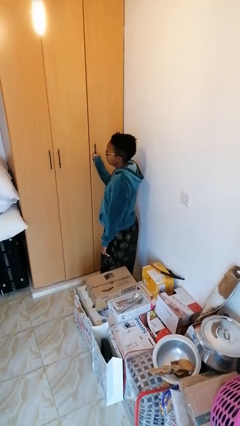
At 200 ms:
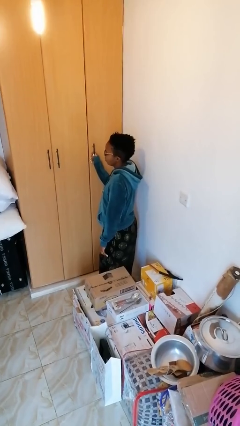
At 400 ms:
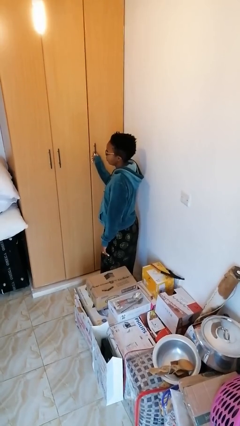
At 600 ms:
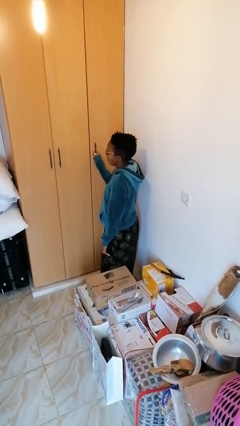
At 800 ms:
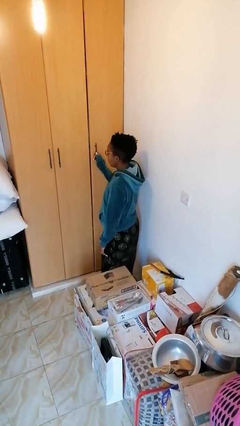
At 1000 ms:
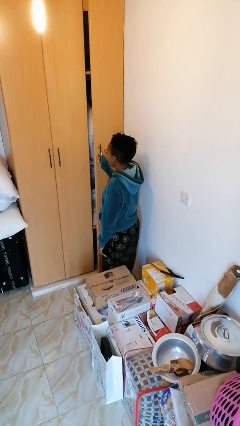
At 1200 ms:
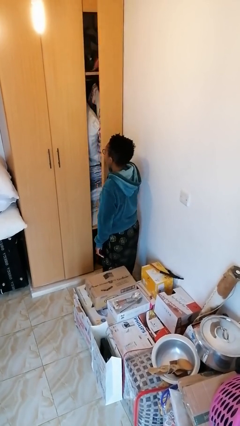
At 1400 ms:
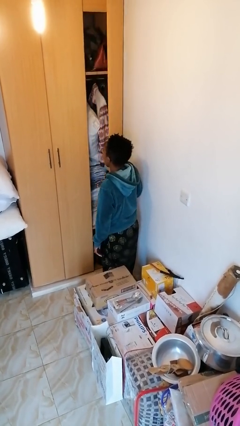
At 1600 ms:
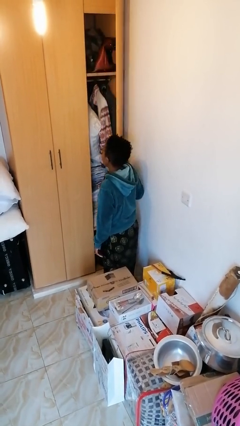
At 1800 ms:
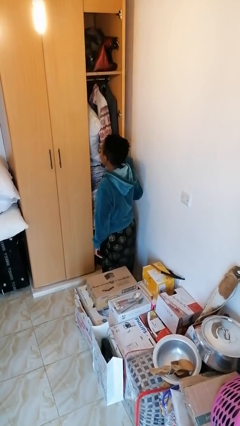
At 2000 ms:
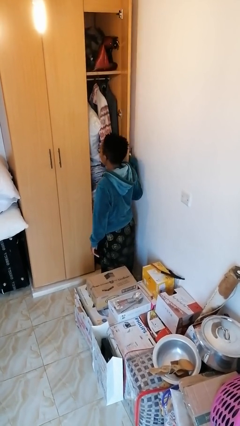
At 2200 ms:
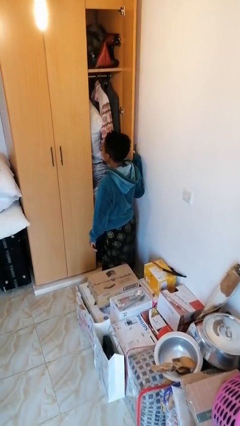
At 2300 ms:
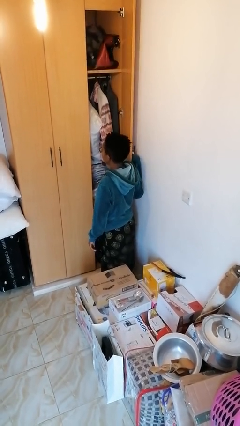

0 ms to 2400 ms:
person opens closet door

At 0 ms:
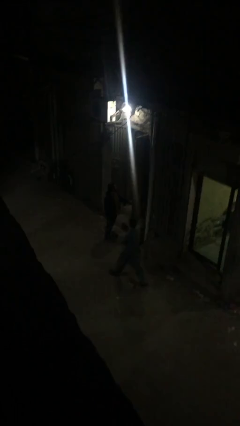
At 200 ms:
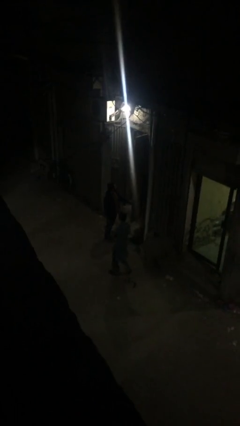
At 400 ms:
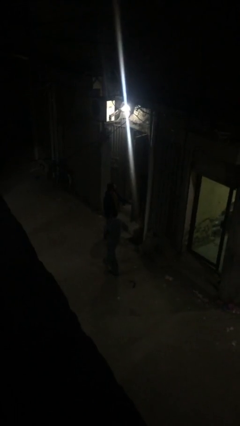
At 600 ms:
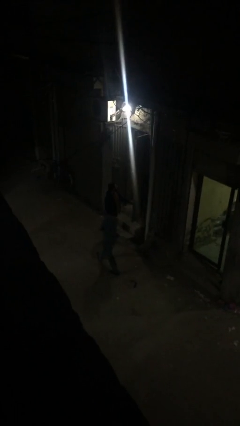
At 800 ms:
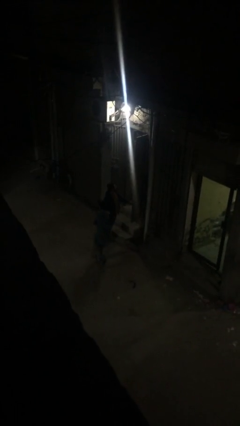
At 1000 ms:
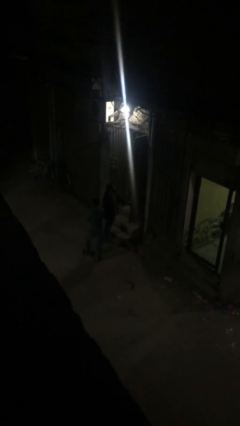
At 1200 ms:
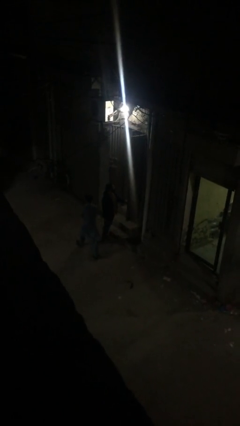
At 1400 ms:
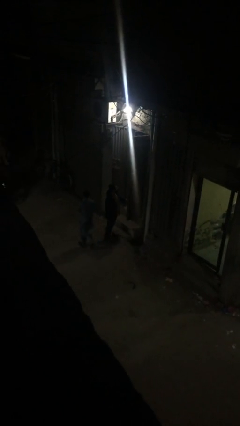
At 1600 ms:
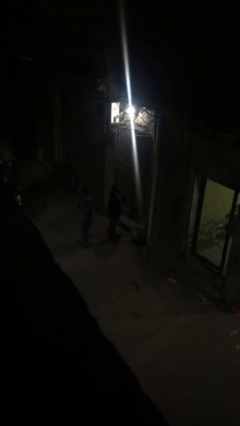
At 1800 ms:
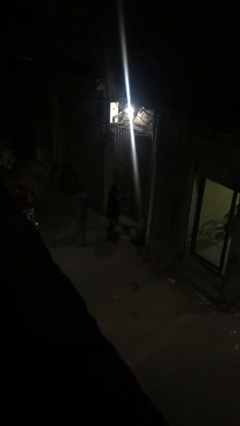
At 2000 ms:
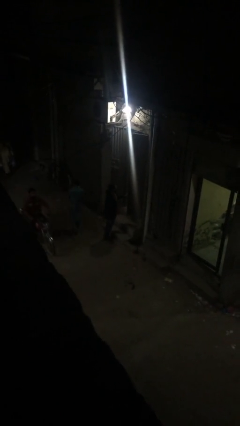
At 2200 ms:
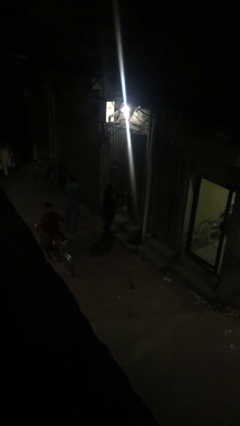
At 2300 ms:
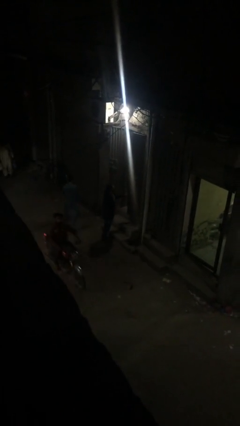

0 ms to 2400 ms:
person closes facility door

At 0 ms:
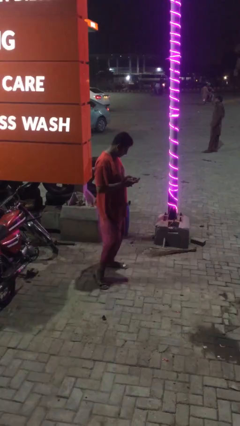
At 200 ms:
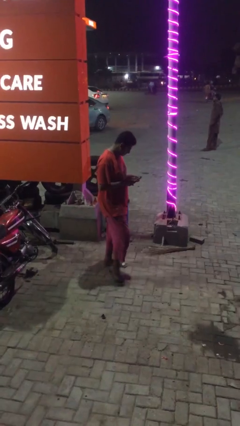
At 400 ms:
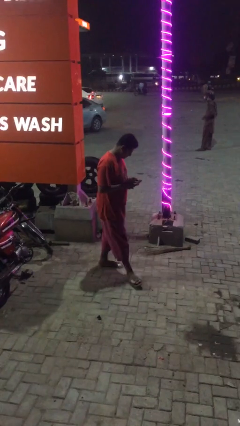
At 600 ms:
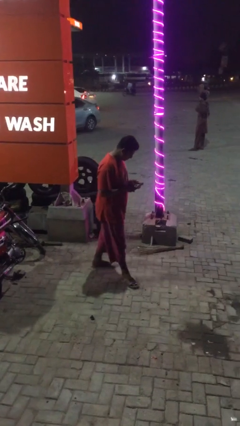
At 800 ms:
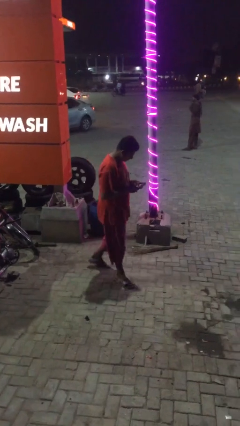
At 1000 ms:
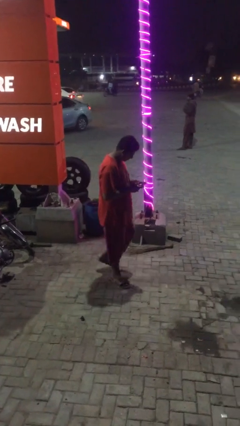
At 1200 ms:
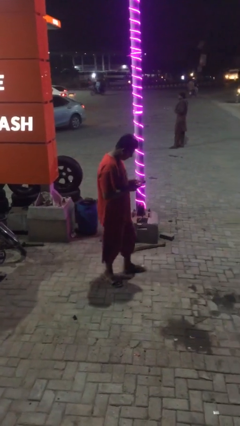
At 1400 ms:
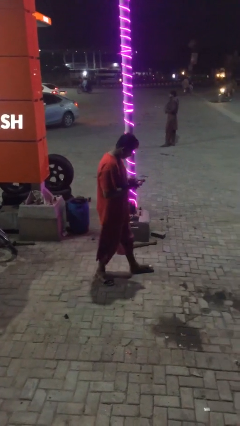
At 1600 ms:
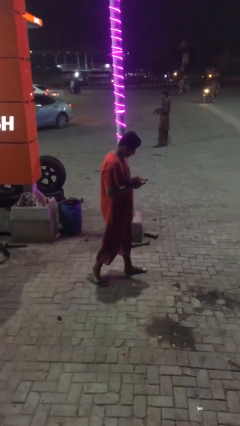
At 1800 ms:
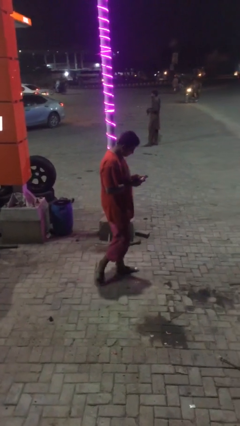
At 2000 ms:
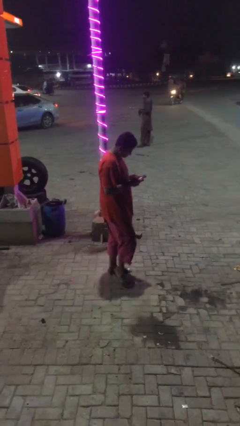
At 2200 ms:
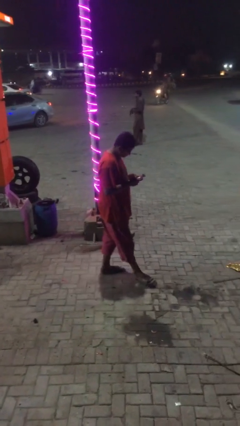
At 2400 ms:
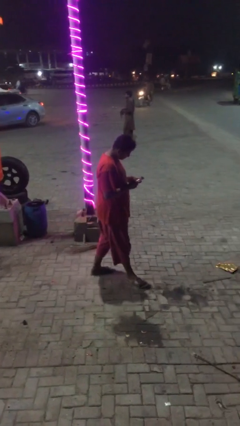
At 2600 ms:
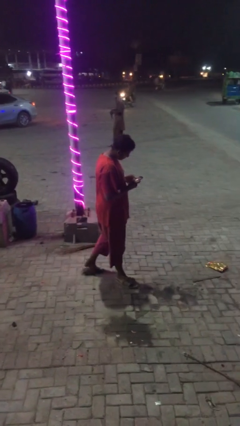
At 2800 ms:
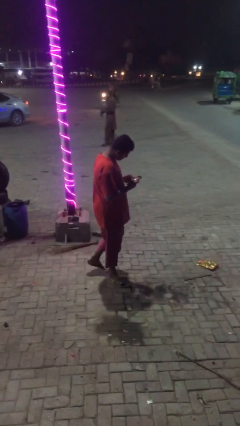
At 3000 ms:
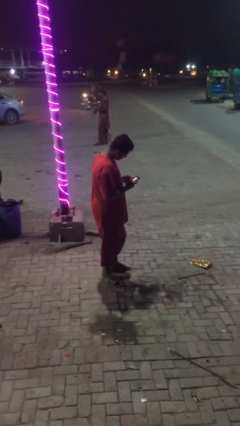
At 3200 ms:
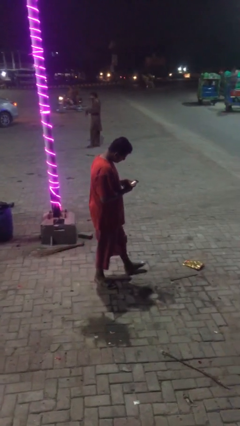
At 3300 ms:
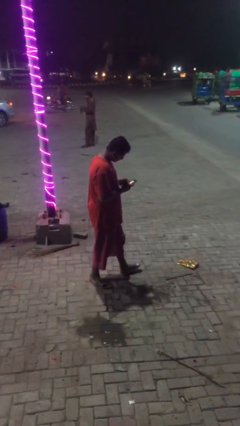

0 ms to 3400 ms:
person texts on phone

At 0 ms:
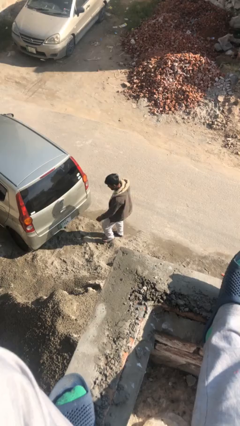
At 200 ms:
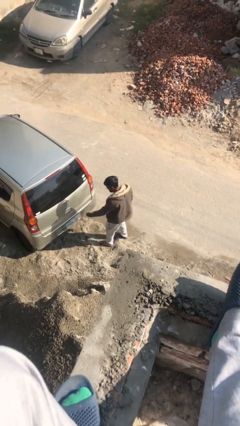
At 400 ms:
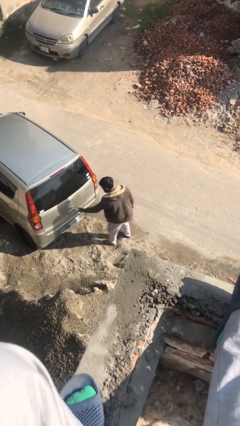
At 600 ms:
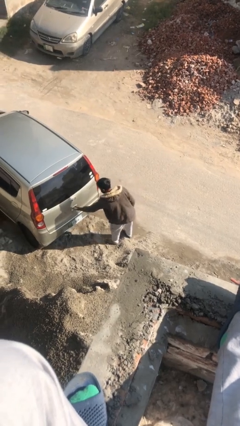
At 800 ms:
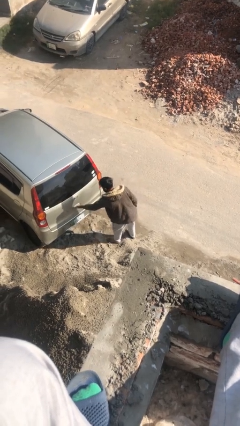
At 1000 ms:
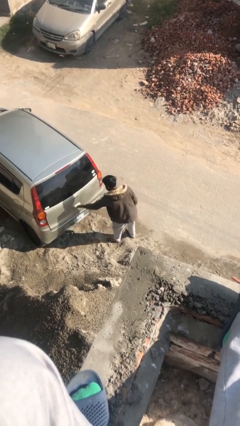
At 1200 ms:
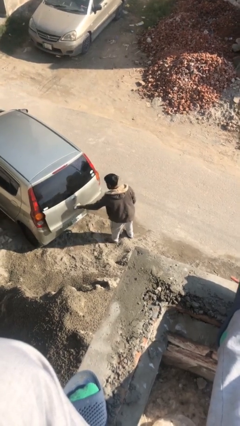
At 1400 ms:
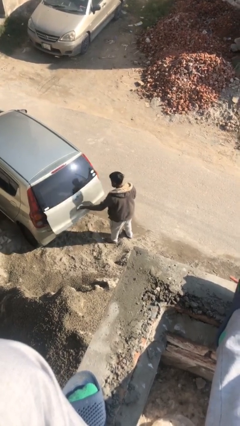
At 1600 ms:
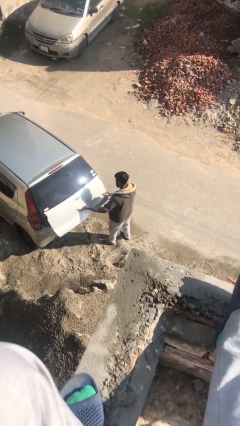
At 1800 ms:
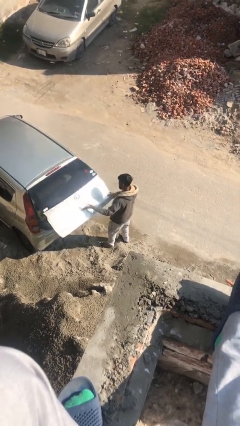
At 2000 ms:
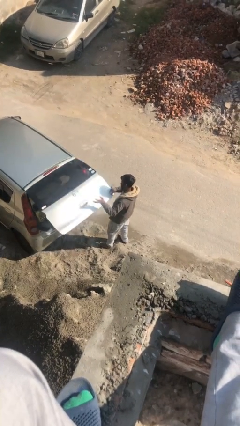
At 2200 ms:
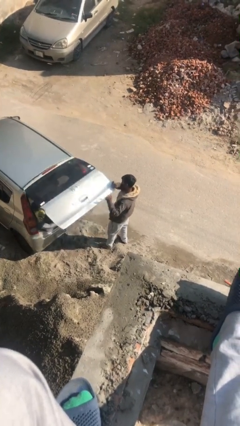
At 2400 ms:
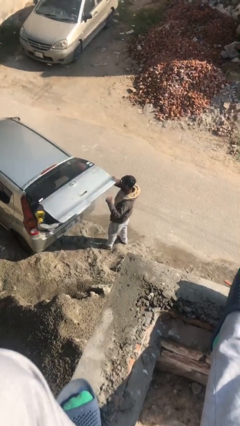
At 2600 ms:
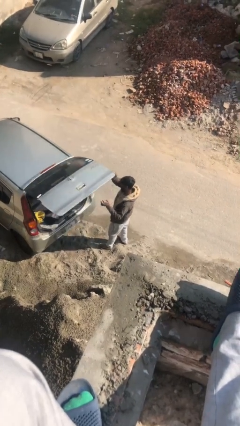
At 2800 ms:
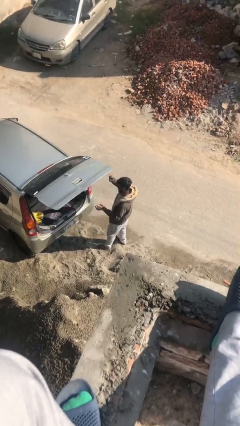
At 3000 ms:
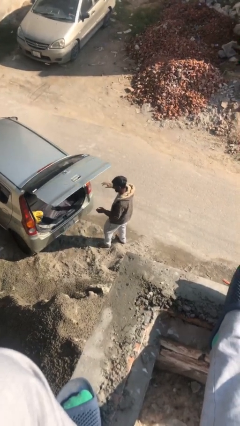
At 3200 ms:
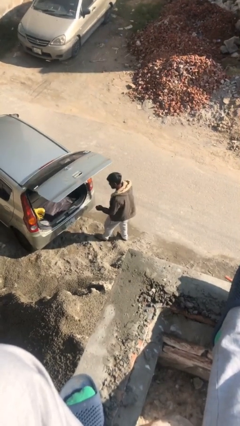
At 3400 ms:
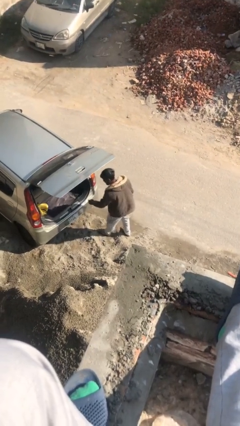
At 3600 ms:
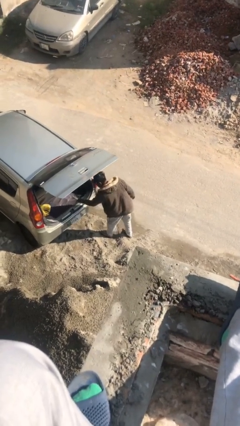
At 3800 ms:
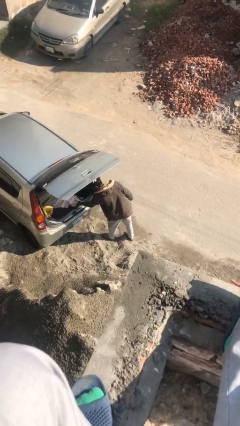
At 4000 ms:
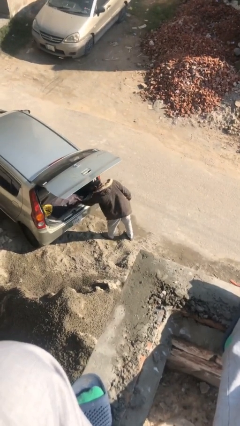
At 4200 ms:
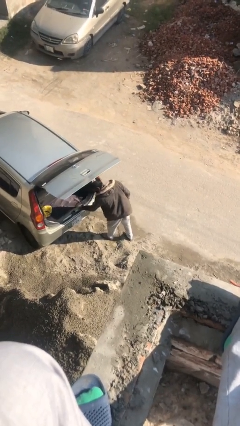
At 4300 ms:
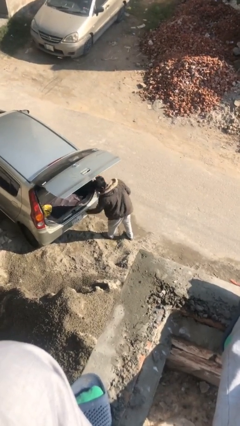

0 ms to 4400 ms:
person opens car trunk

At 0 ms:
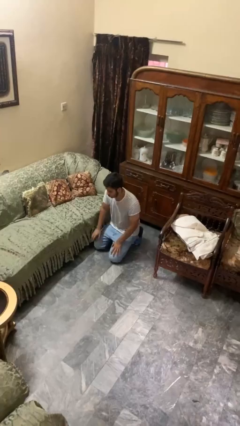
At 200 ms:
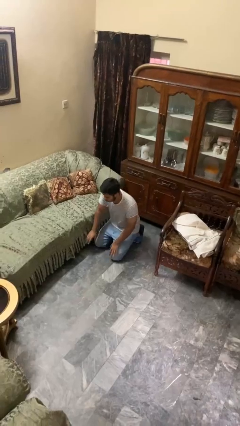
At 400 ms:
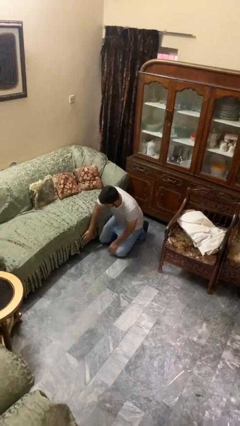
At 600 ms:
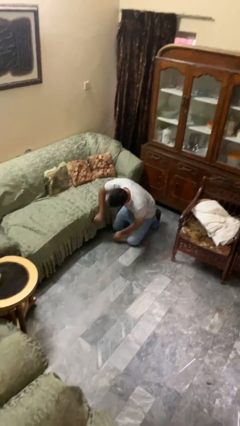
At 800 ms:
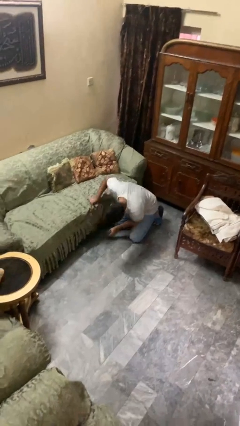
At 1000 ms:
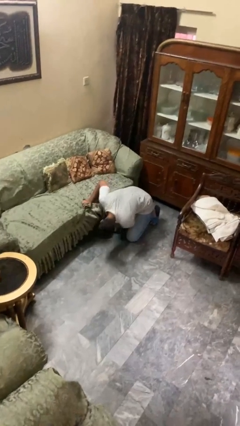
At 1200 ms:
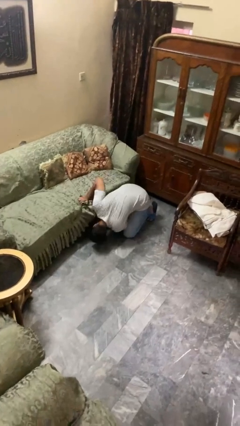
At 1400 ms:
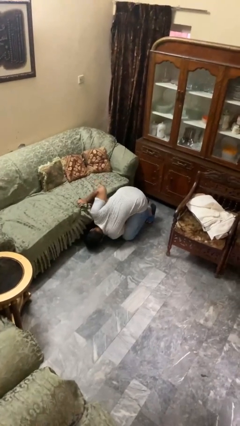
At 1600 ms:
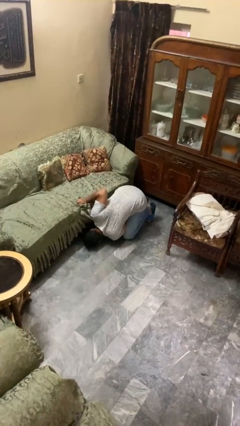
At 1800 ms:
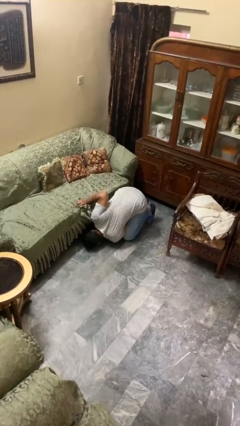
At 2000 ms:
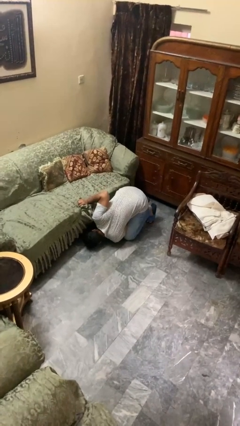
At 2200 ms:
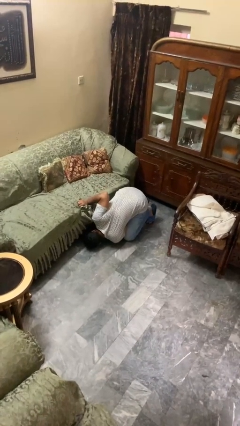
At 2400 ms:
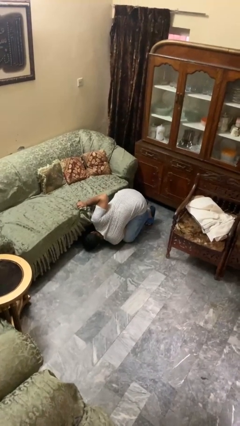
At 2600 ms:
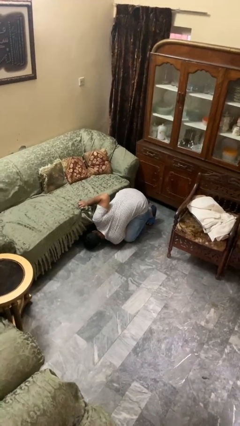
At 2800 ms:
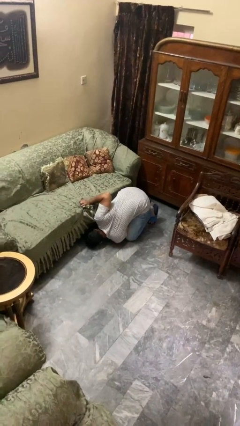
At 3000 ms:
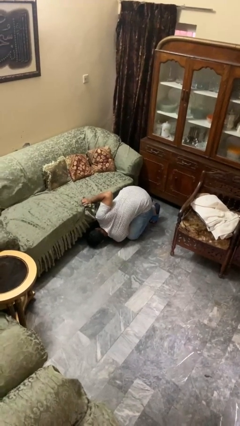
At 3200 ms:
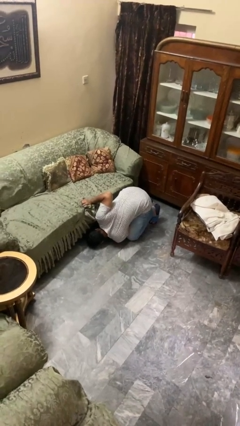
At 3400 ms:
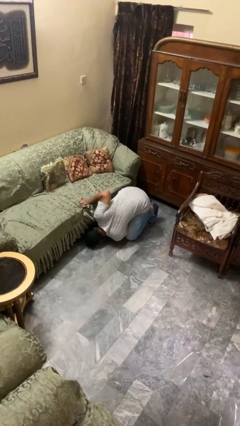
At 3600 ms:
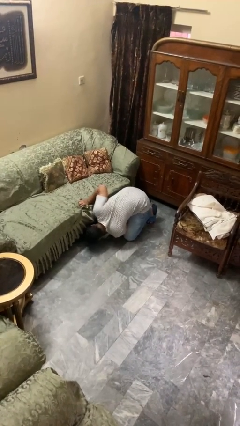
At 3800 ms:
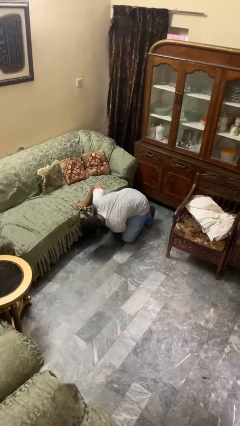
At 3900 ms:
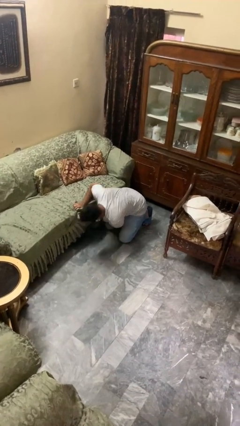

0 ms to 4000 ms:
person searches under couch

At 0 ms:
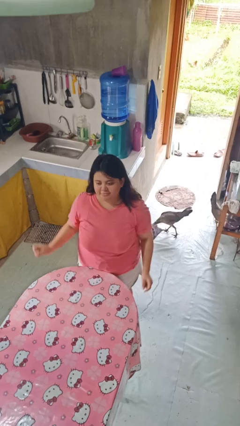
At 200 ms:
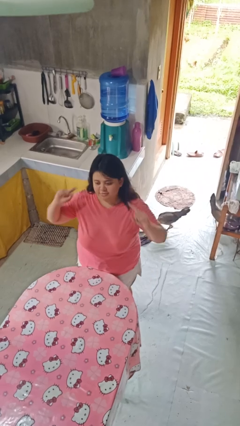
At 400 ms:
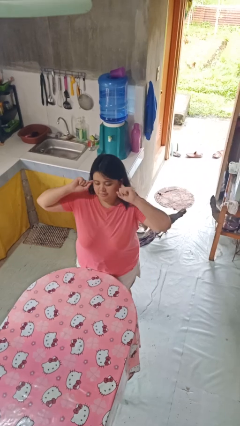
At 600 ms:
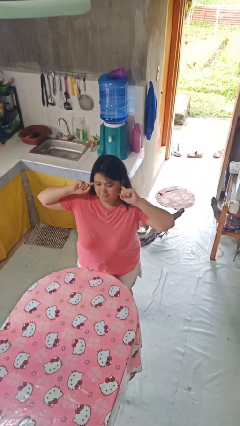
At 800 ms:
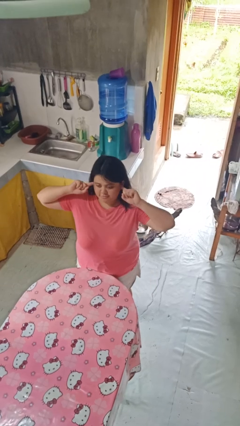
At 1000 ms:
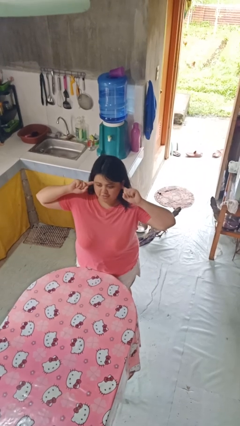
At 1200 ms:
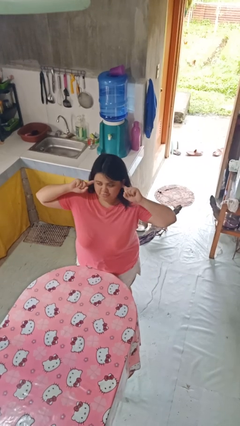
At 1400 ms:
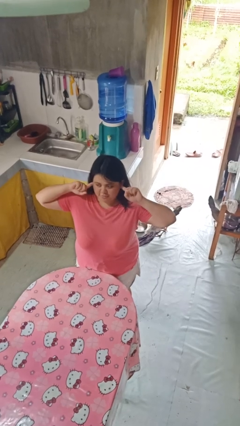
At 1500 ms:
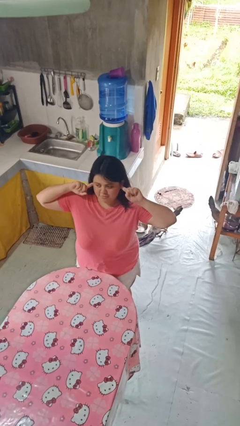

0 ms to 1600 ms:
person puts fingers in ear
